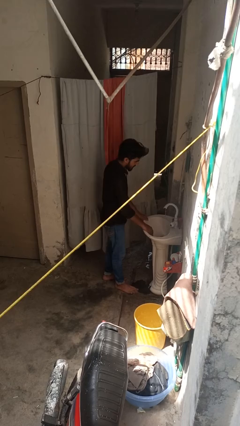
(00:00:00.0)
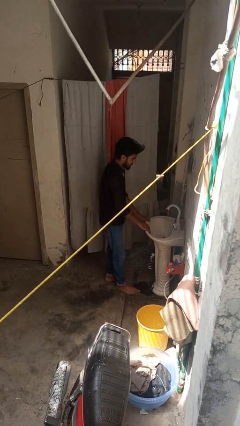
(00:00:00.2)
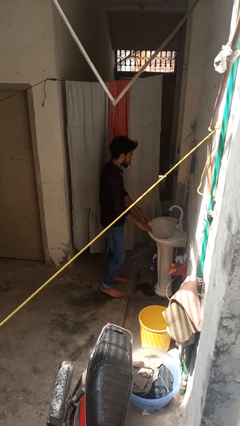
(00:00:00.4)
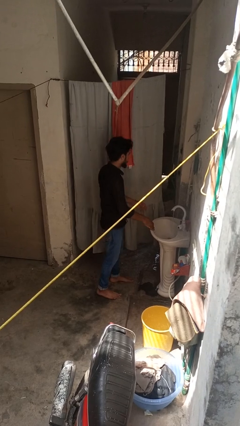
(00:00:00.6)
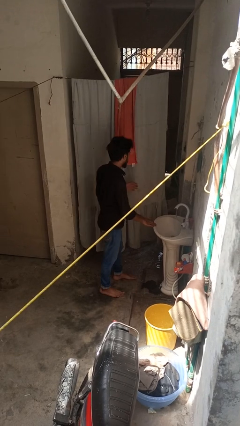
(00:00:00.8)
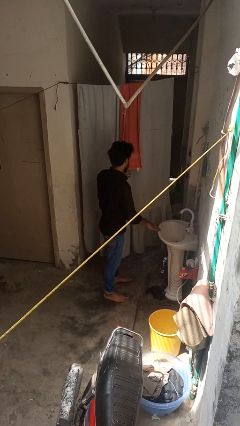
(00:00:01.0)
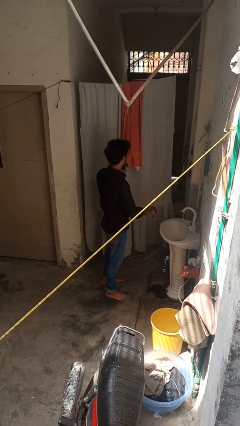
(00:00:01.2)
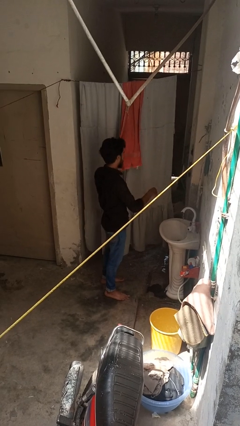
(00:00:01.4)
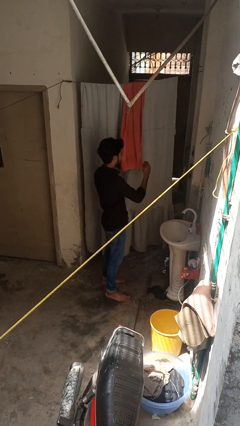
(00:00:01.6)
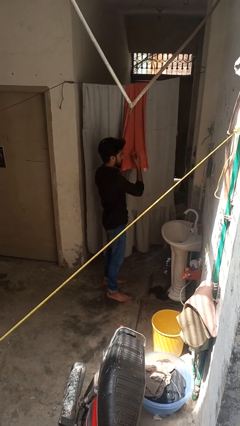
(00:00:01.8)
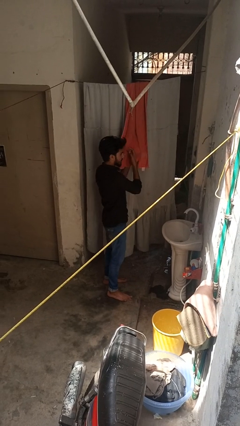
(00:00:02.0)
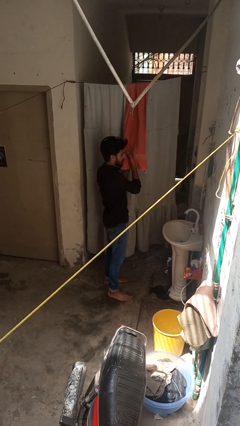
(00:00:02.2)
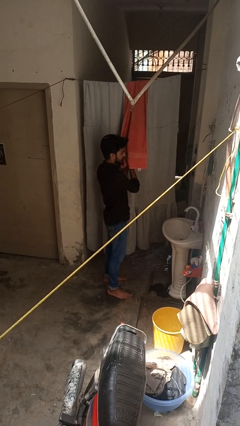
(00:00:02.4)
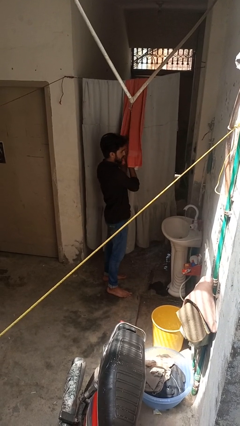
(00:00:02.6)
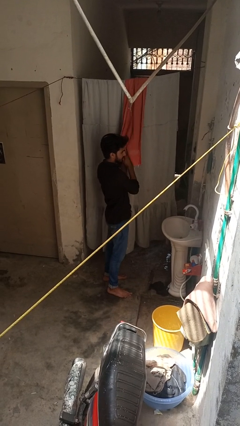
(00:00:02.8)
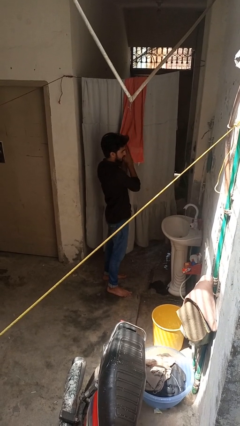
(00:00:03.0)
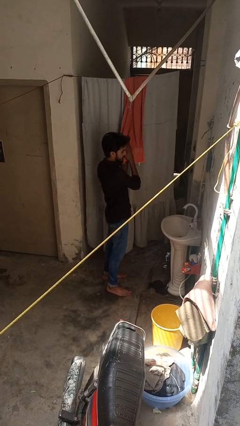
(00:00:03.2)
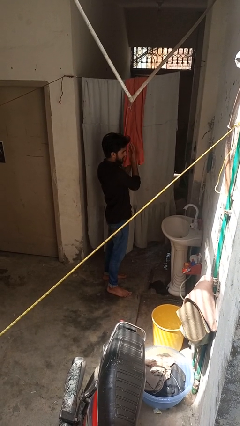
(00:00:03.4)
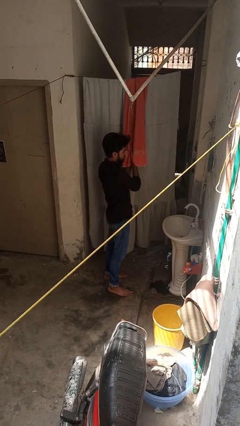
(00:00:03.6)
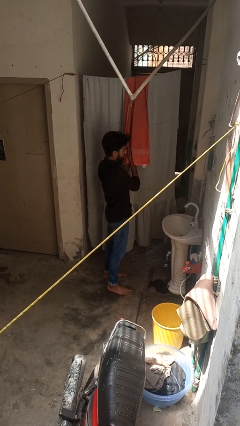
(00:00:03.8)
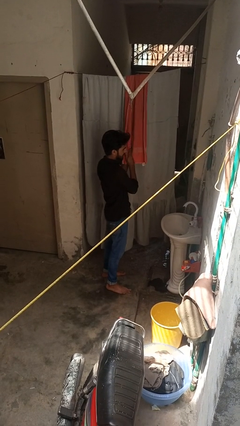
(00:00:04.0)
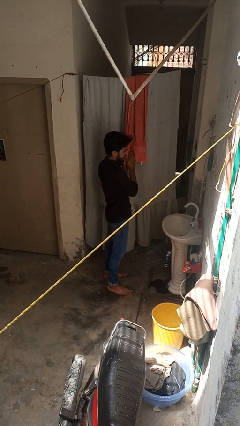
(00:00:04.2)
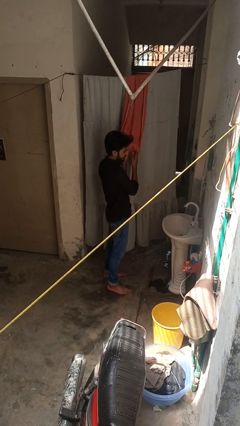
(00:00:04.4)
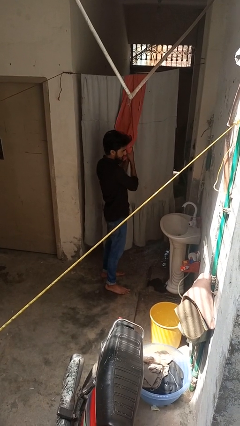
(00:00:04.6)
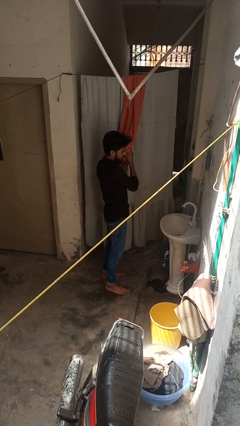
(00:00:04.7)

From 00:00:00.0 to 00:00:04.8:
person dries hands with towel

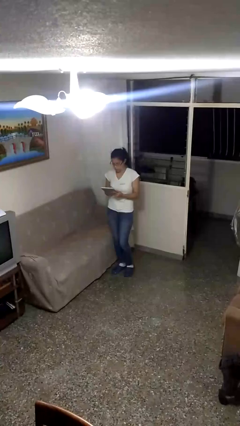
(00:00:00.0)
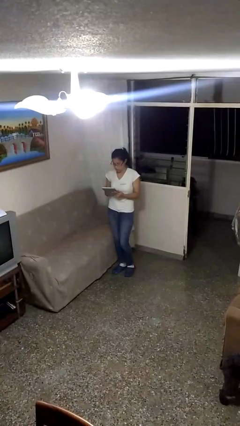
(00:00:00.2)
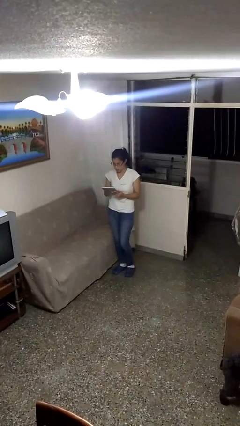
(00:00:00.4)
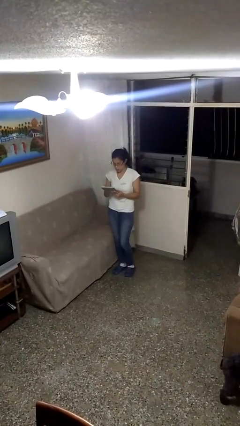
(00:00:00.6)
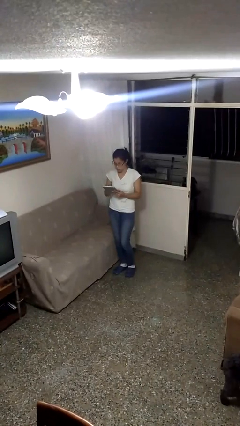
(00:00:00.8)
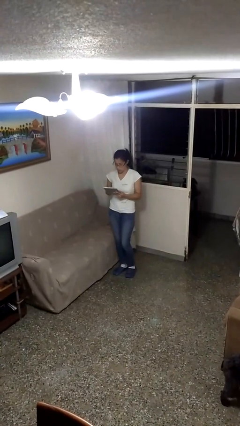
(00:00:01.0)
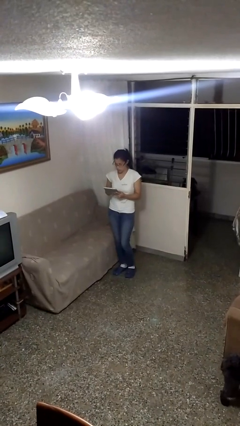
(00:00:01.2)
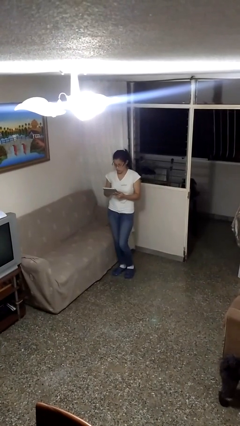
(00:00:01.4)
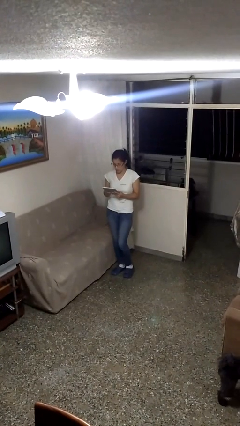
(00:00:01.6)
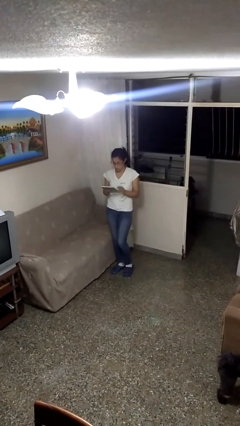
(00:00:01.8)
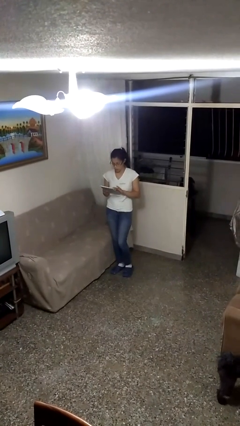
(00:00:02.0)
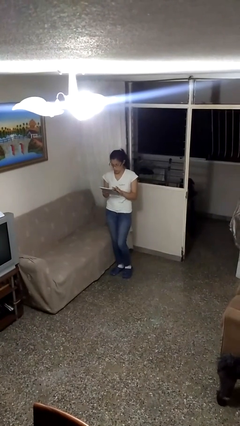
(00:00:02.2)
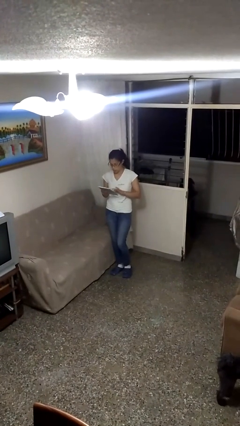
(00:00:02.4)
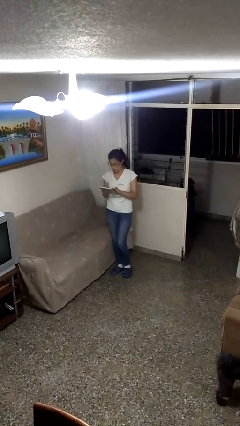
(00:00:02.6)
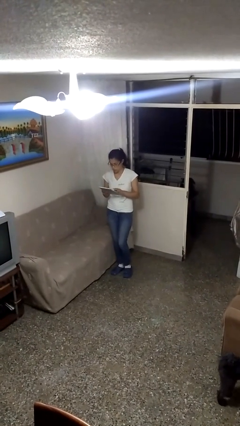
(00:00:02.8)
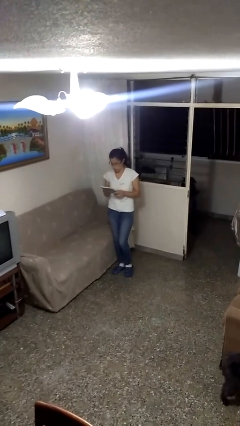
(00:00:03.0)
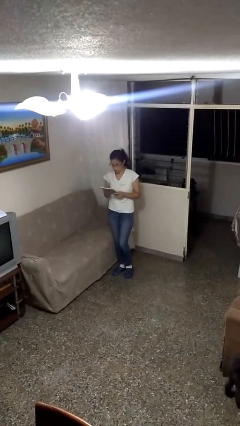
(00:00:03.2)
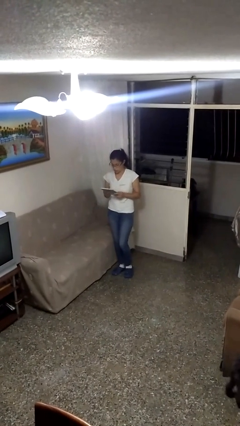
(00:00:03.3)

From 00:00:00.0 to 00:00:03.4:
person interacts with tablet

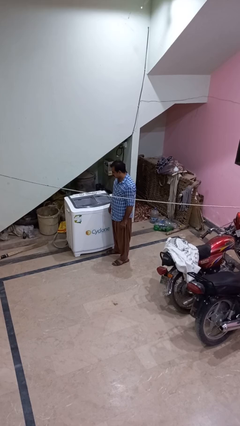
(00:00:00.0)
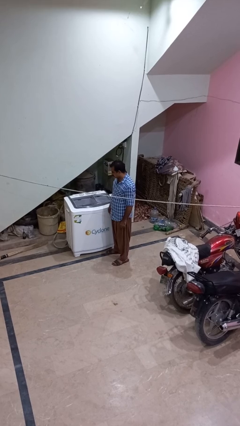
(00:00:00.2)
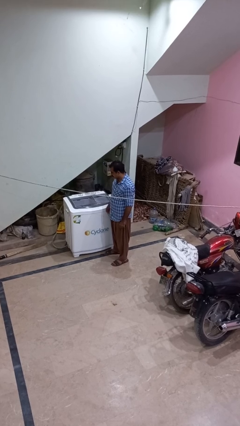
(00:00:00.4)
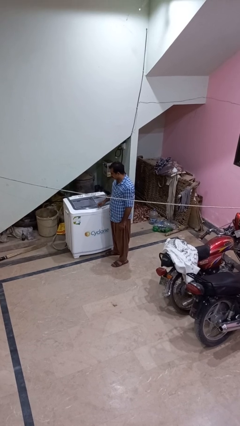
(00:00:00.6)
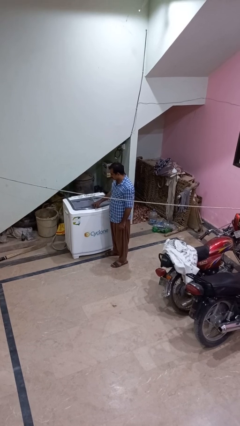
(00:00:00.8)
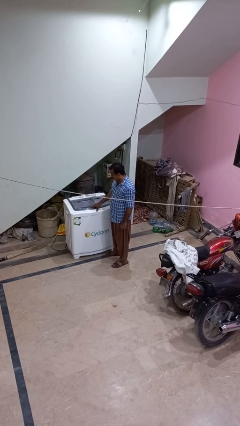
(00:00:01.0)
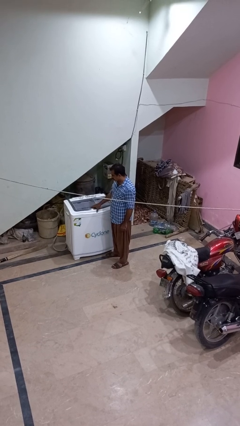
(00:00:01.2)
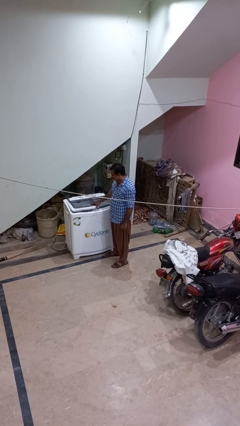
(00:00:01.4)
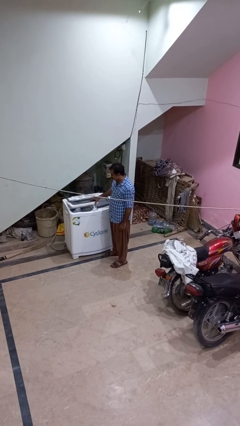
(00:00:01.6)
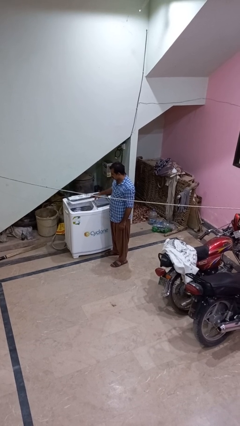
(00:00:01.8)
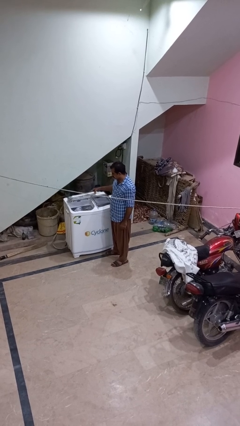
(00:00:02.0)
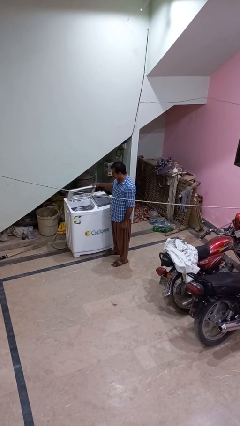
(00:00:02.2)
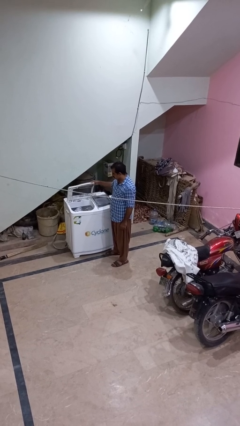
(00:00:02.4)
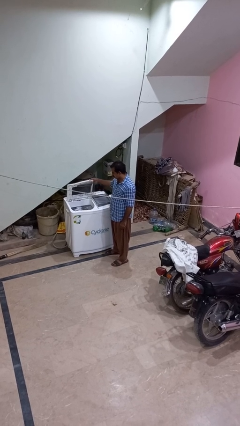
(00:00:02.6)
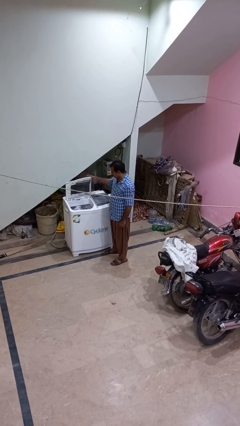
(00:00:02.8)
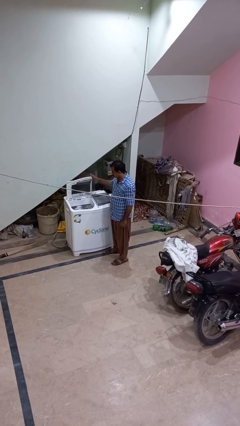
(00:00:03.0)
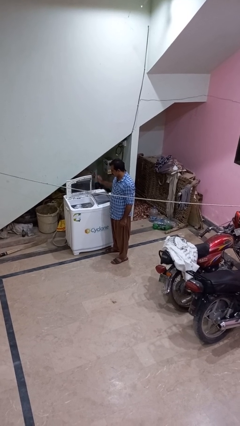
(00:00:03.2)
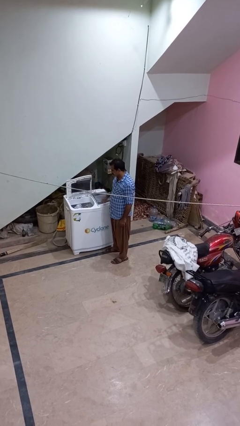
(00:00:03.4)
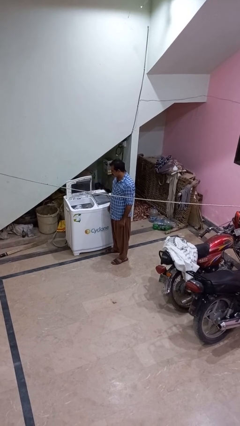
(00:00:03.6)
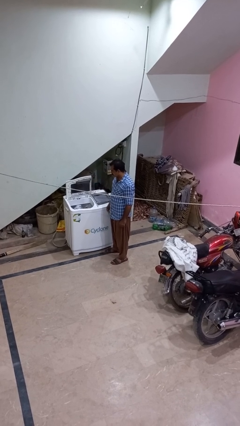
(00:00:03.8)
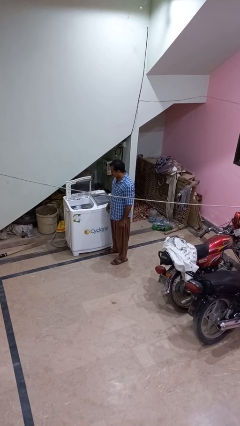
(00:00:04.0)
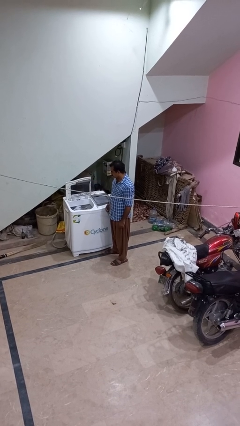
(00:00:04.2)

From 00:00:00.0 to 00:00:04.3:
person opens clothes washer

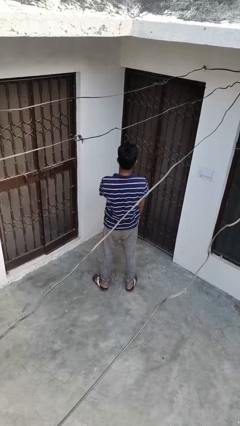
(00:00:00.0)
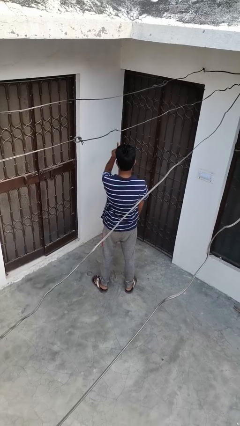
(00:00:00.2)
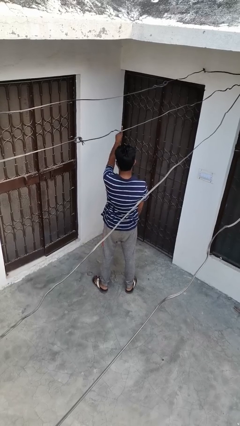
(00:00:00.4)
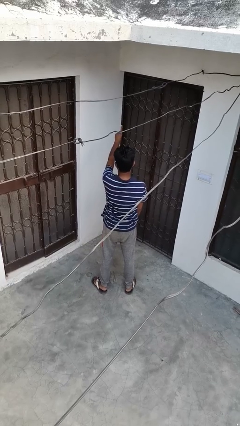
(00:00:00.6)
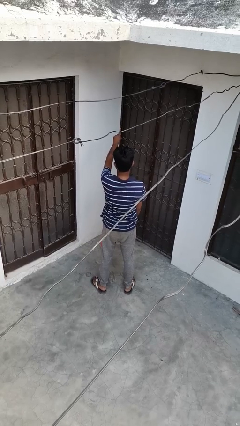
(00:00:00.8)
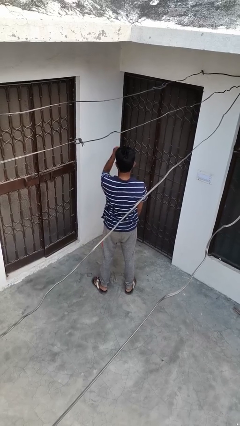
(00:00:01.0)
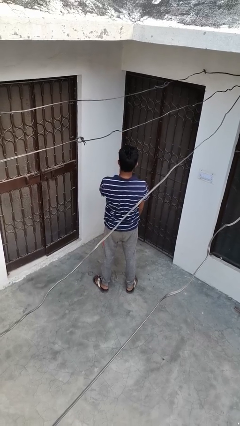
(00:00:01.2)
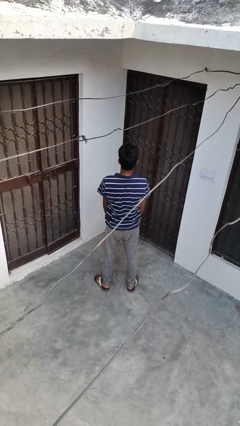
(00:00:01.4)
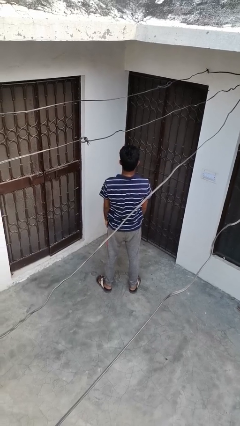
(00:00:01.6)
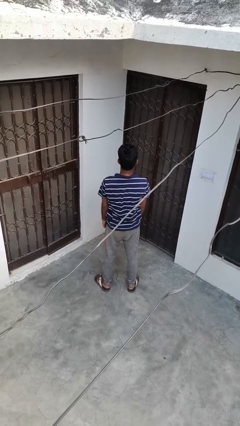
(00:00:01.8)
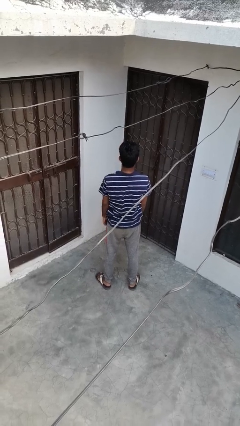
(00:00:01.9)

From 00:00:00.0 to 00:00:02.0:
person gestures number one

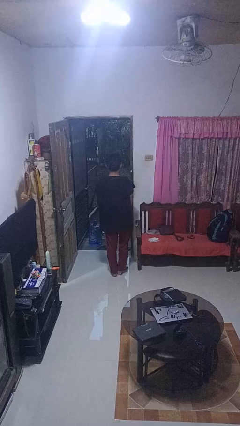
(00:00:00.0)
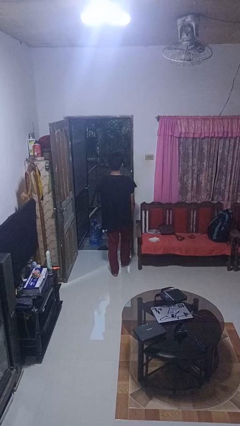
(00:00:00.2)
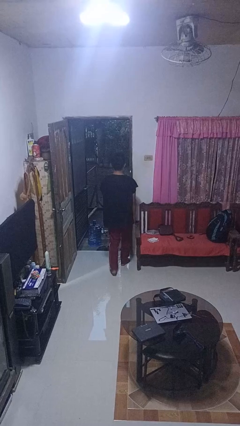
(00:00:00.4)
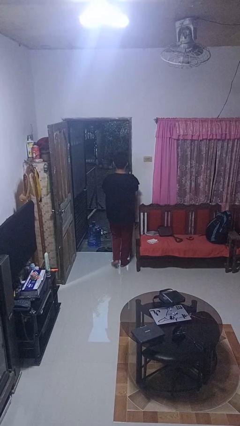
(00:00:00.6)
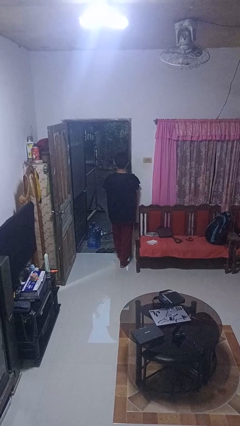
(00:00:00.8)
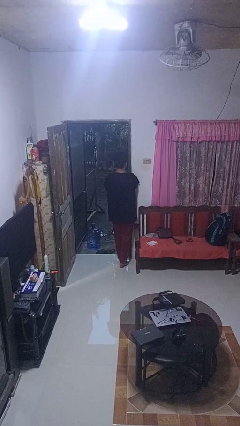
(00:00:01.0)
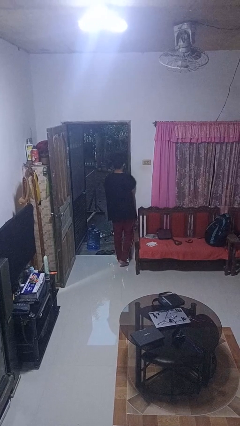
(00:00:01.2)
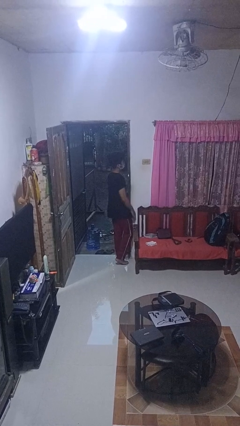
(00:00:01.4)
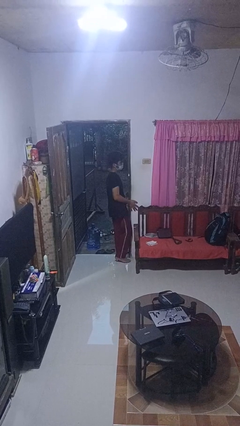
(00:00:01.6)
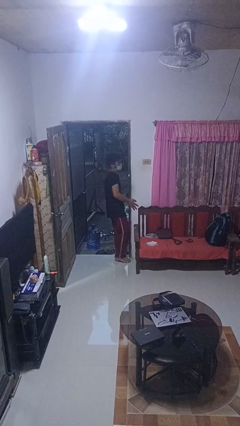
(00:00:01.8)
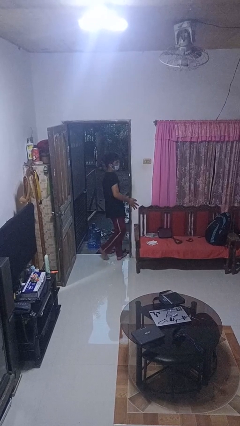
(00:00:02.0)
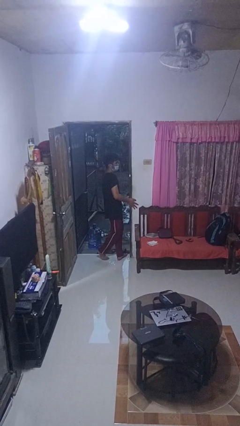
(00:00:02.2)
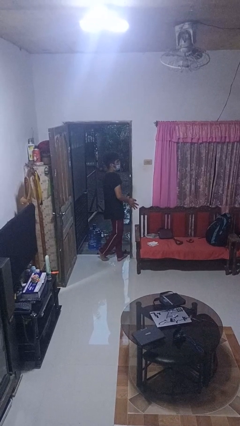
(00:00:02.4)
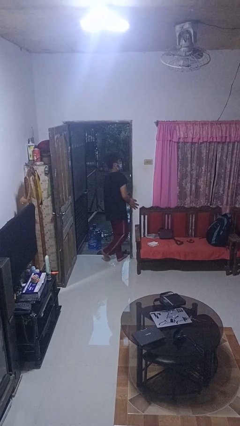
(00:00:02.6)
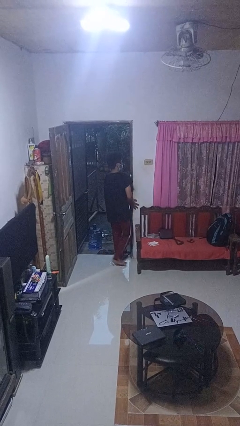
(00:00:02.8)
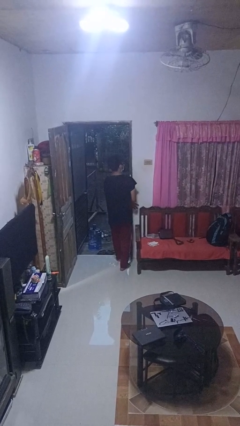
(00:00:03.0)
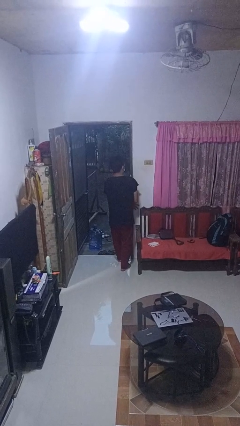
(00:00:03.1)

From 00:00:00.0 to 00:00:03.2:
person bumps into wall
